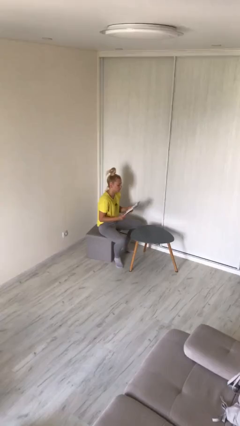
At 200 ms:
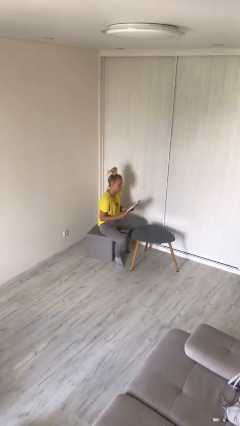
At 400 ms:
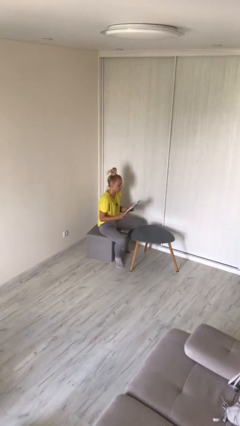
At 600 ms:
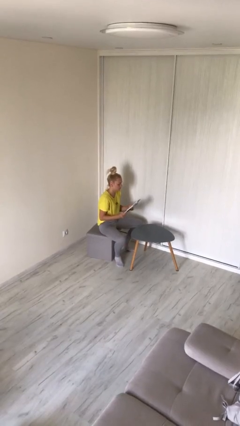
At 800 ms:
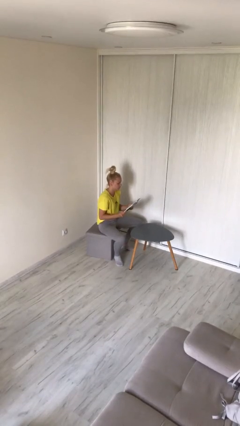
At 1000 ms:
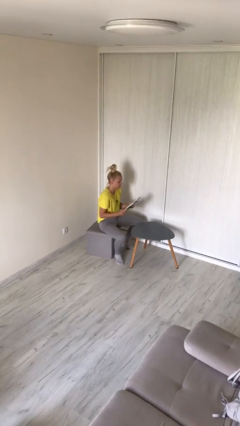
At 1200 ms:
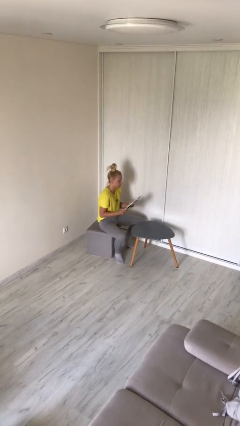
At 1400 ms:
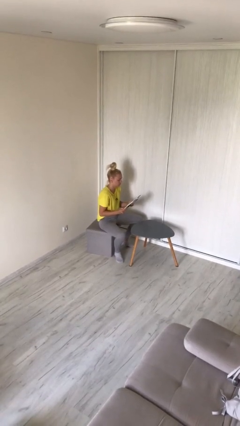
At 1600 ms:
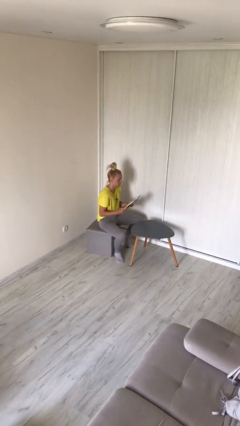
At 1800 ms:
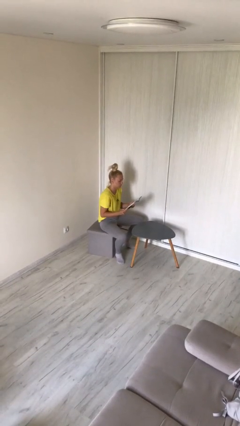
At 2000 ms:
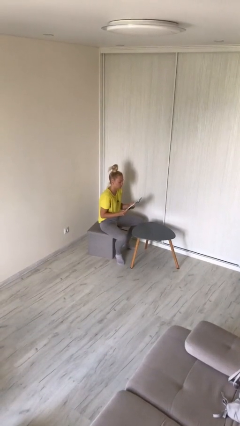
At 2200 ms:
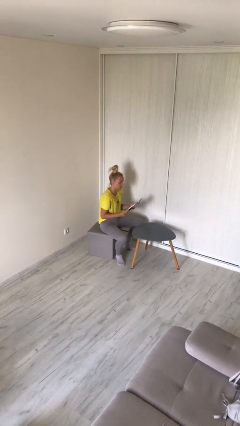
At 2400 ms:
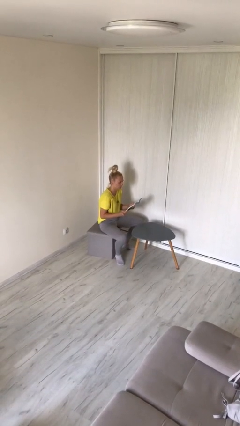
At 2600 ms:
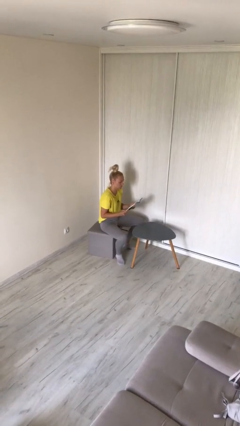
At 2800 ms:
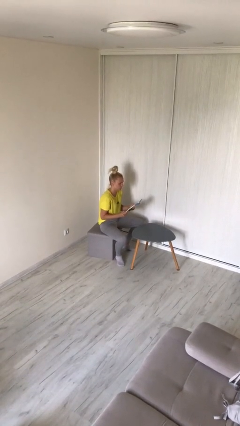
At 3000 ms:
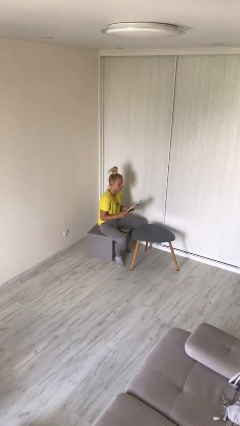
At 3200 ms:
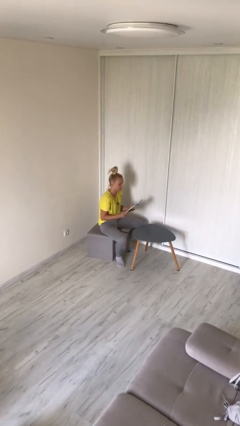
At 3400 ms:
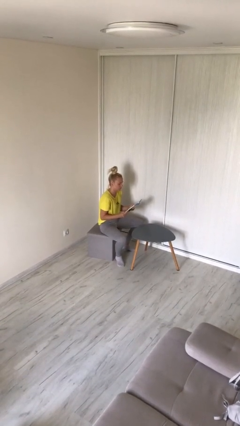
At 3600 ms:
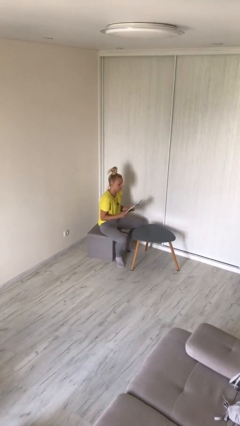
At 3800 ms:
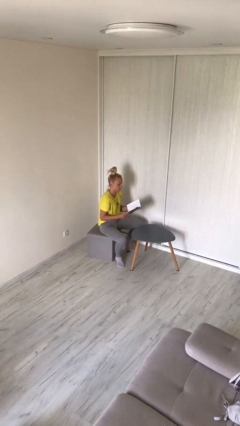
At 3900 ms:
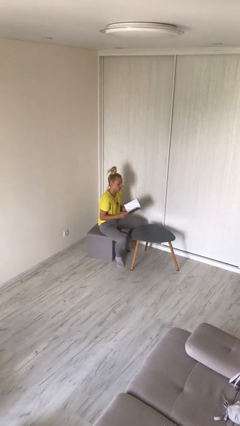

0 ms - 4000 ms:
person reads document

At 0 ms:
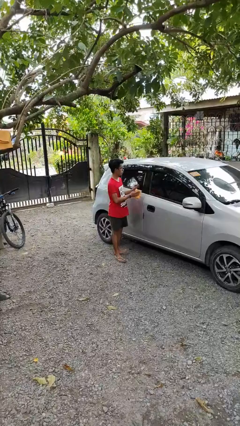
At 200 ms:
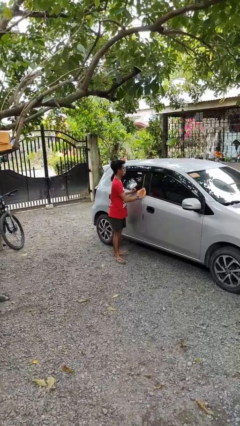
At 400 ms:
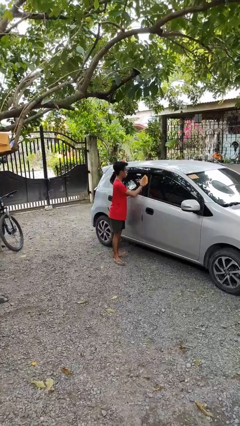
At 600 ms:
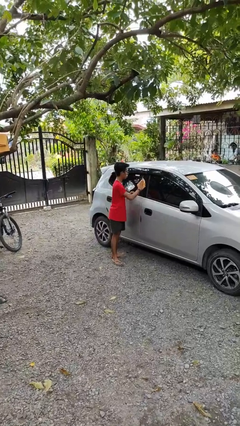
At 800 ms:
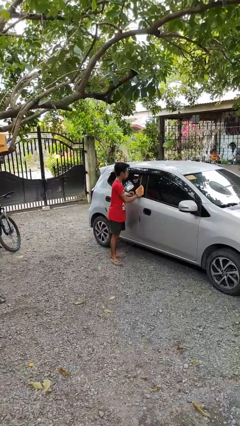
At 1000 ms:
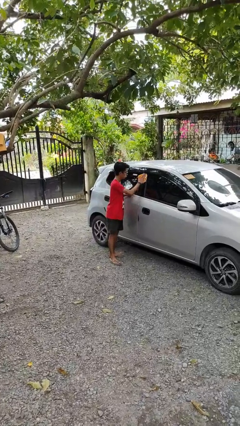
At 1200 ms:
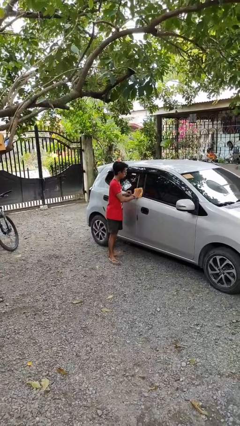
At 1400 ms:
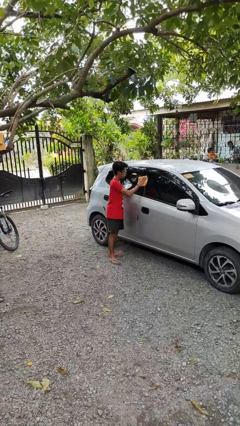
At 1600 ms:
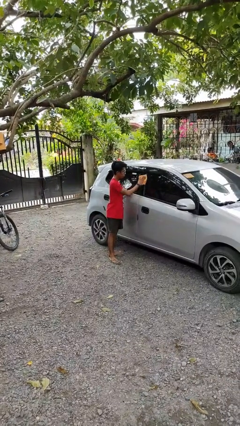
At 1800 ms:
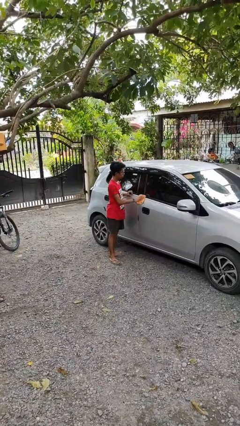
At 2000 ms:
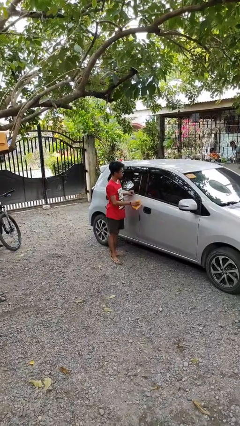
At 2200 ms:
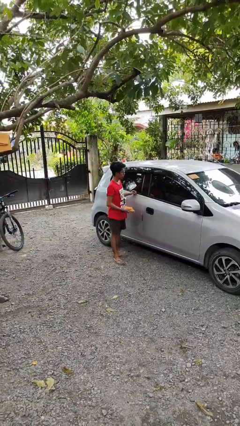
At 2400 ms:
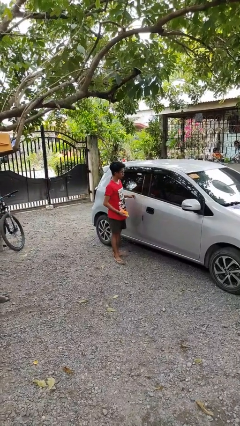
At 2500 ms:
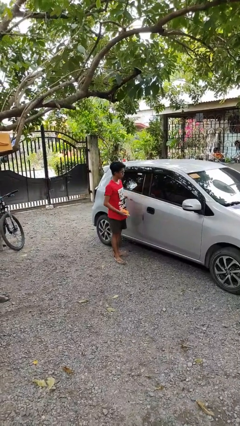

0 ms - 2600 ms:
person polishes car with rag

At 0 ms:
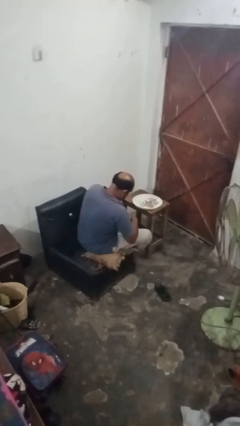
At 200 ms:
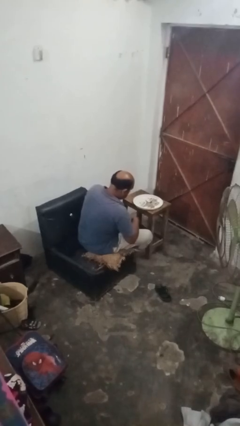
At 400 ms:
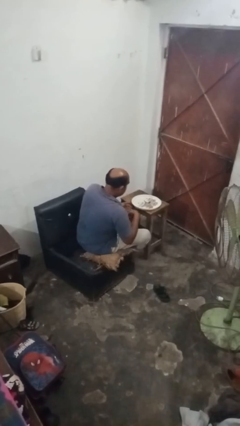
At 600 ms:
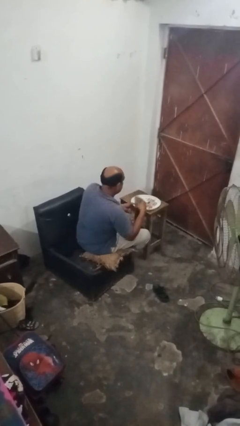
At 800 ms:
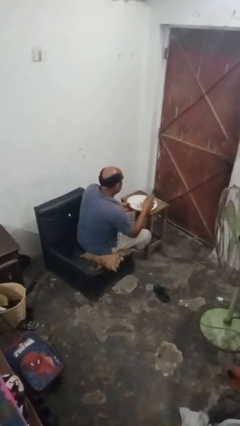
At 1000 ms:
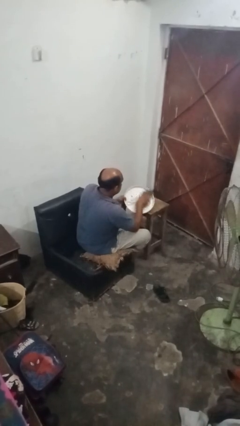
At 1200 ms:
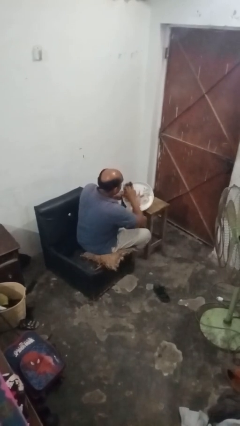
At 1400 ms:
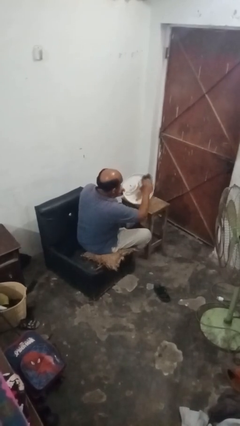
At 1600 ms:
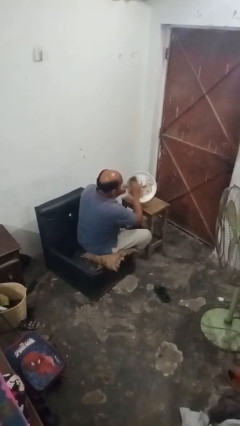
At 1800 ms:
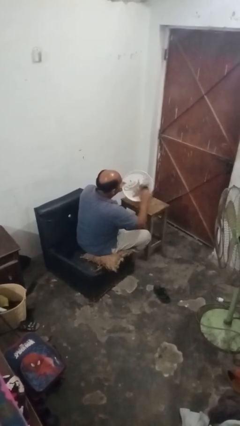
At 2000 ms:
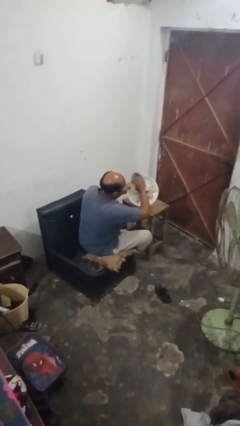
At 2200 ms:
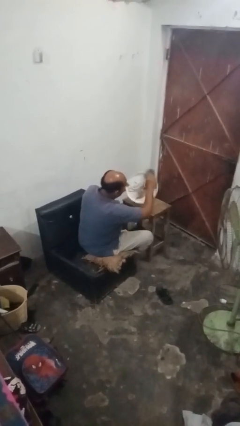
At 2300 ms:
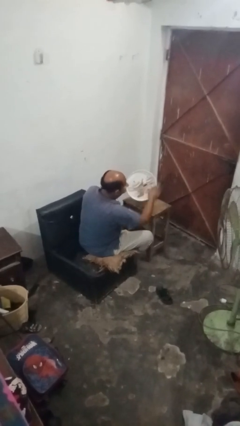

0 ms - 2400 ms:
person dries dish

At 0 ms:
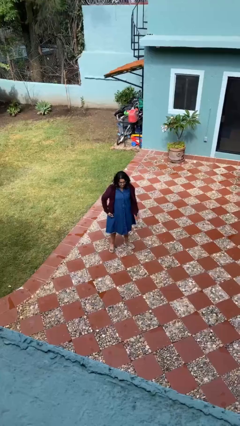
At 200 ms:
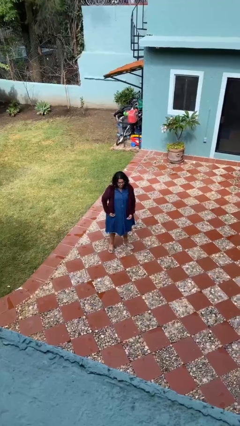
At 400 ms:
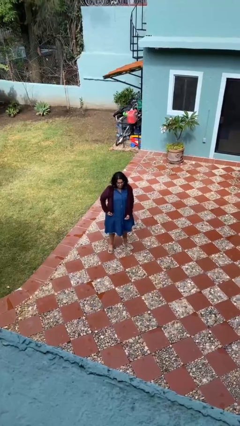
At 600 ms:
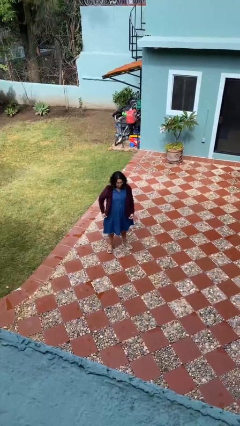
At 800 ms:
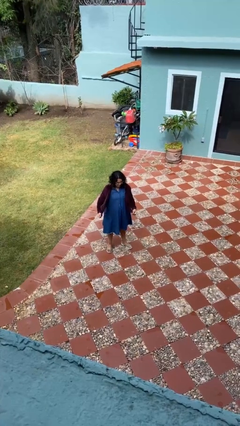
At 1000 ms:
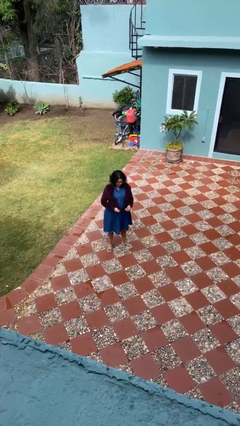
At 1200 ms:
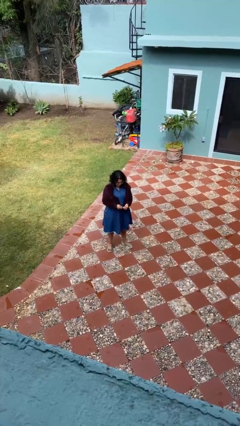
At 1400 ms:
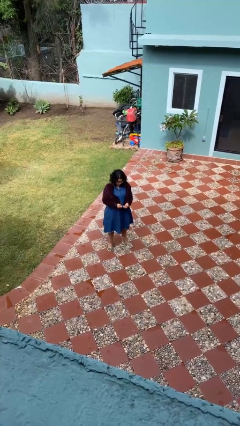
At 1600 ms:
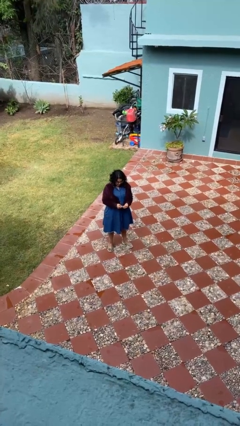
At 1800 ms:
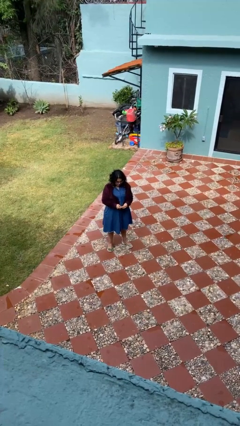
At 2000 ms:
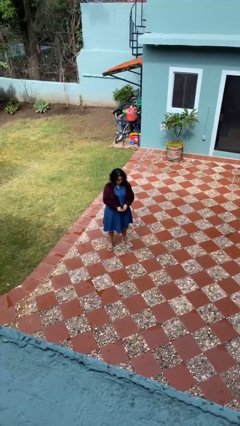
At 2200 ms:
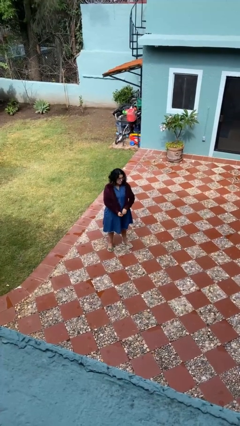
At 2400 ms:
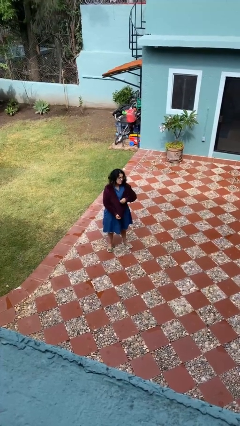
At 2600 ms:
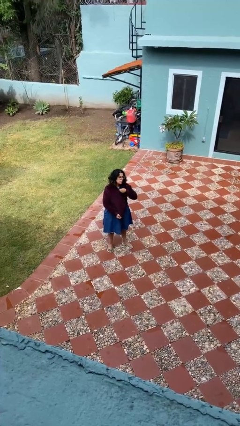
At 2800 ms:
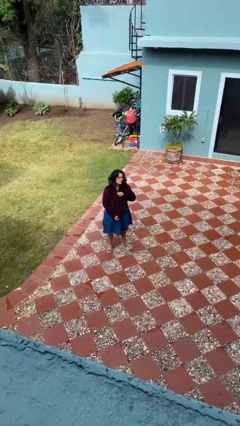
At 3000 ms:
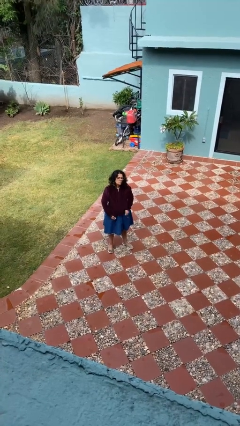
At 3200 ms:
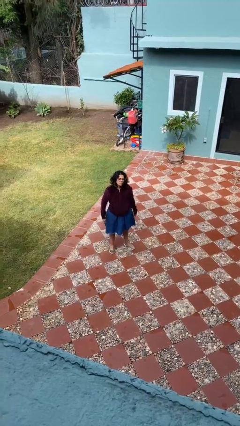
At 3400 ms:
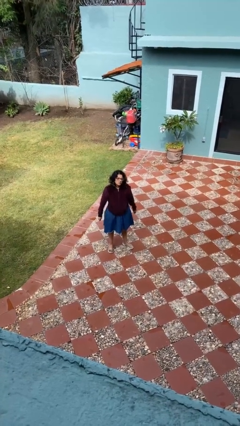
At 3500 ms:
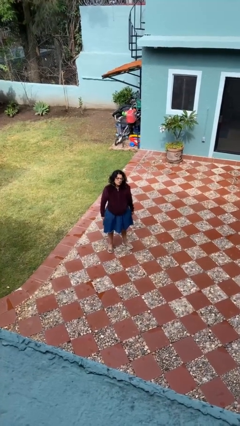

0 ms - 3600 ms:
person zips up jacket

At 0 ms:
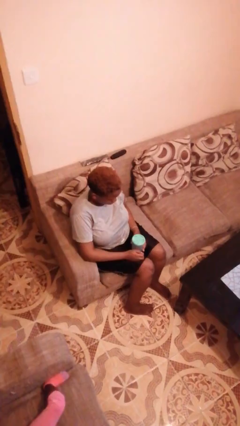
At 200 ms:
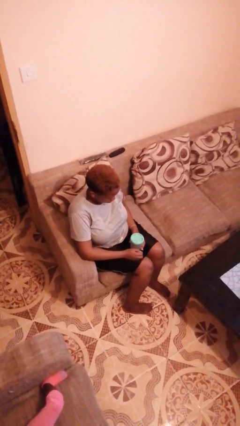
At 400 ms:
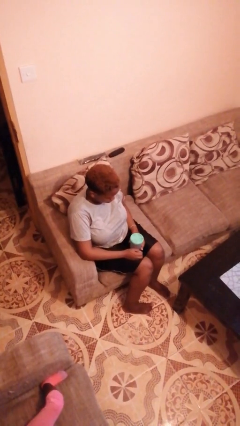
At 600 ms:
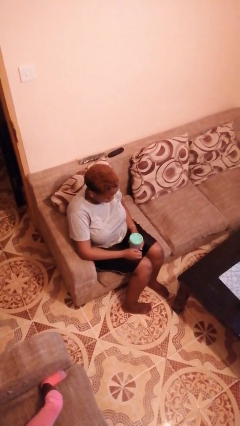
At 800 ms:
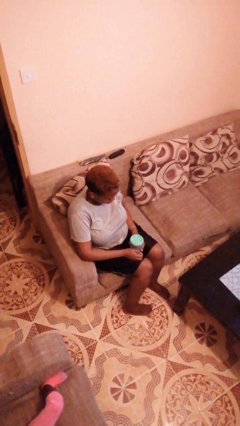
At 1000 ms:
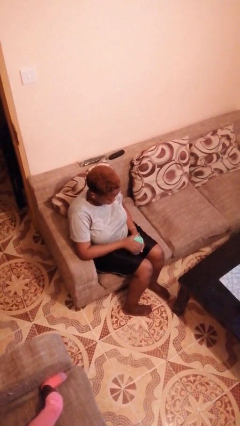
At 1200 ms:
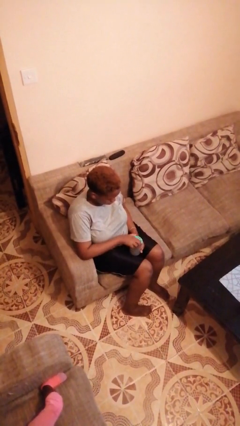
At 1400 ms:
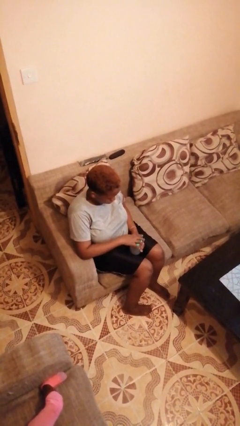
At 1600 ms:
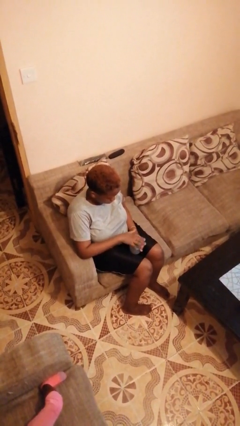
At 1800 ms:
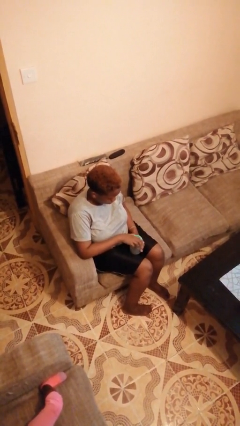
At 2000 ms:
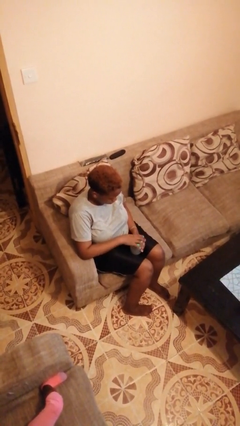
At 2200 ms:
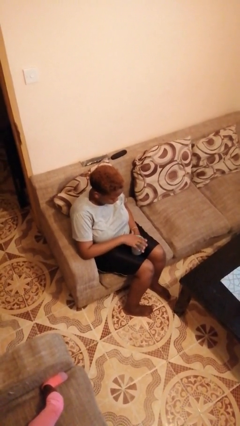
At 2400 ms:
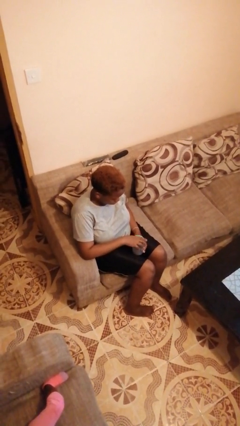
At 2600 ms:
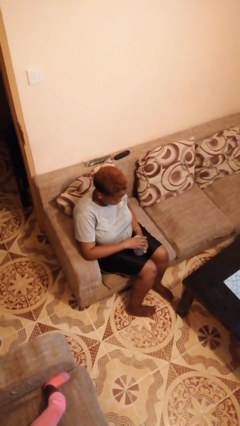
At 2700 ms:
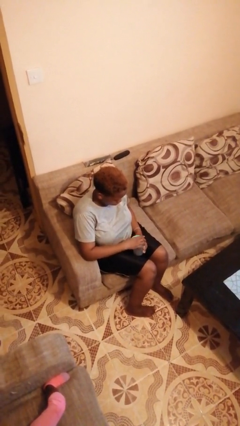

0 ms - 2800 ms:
person opens jar

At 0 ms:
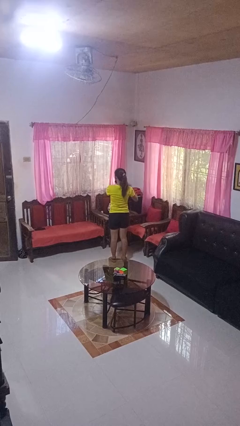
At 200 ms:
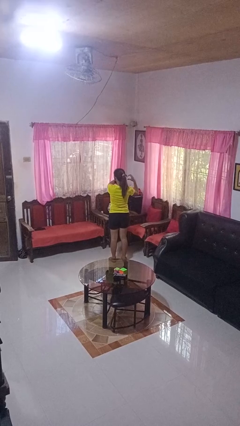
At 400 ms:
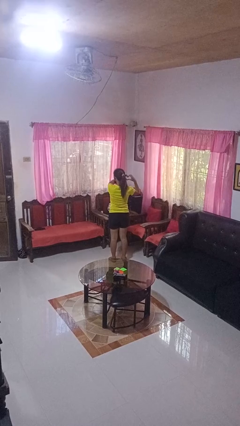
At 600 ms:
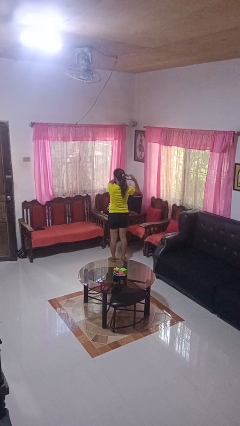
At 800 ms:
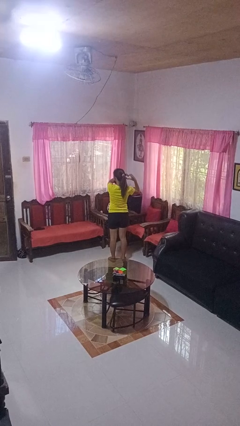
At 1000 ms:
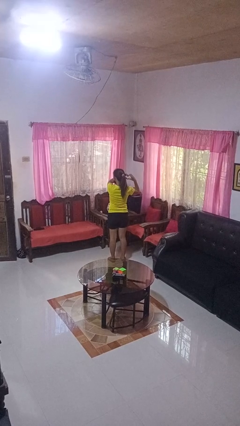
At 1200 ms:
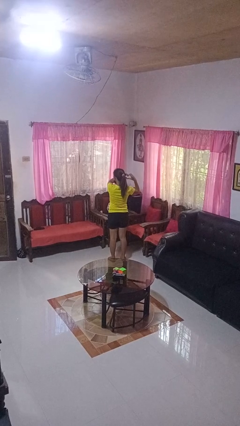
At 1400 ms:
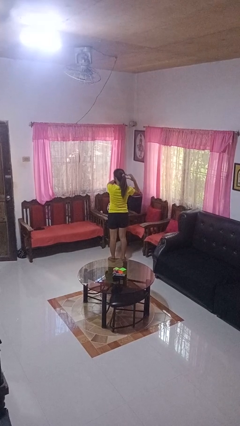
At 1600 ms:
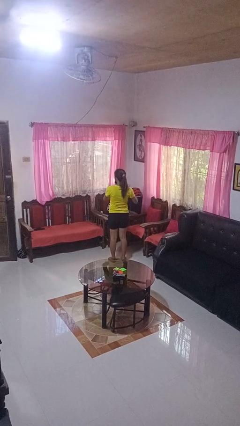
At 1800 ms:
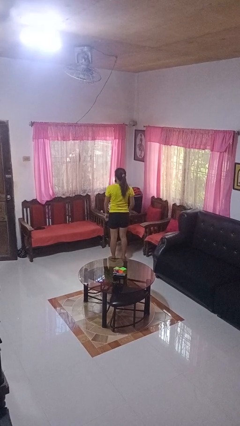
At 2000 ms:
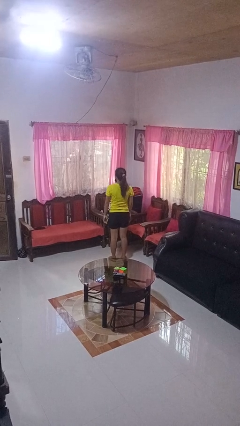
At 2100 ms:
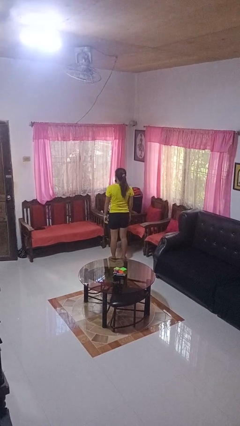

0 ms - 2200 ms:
person gestures heart
